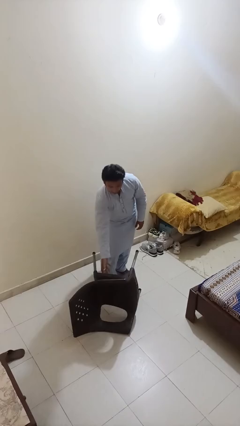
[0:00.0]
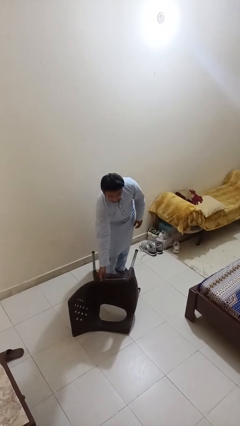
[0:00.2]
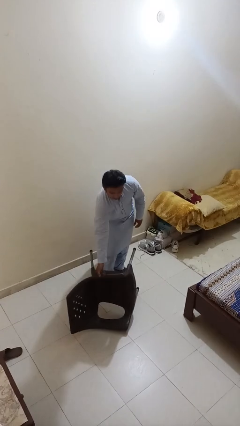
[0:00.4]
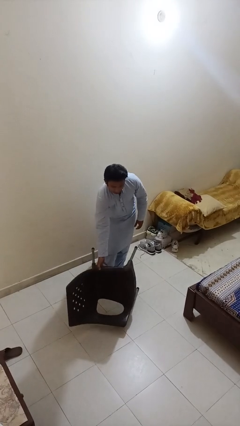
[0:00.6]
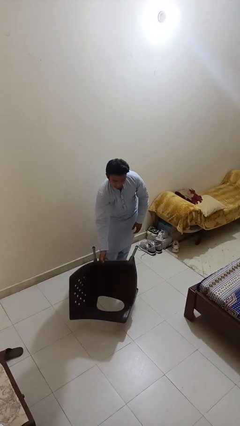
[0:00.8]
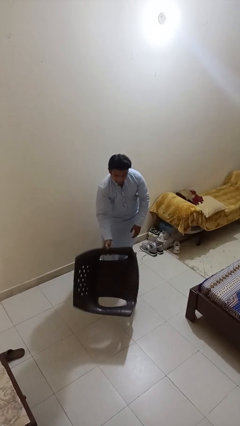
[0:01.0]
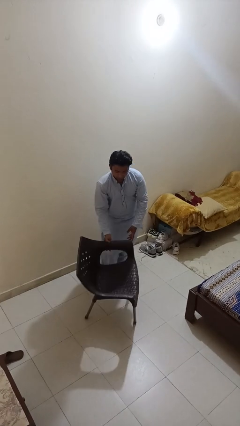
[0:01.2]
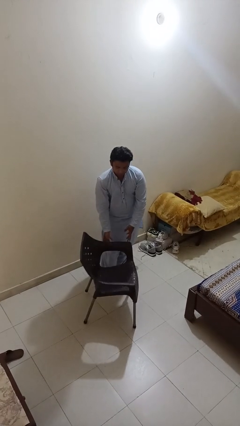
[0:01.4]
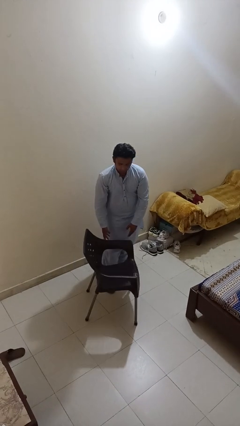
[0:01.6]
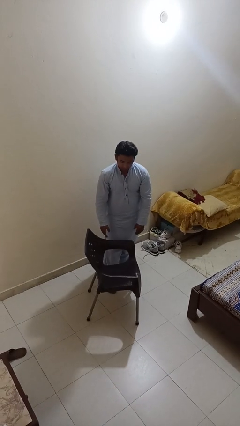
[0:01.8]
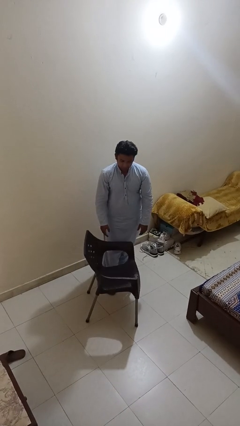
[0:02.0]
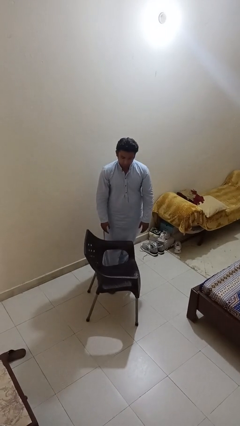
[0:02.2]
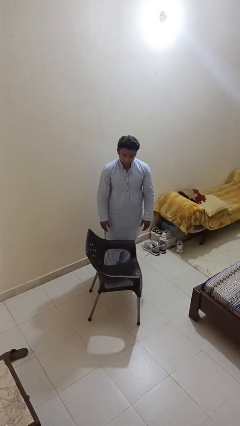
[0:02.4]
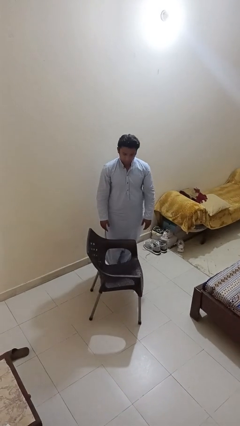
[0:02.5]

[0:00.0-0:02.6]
person sets upright furniture

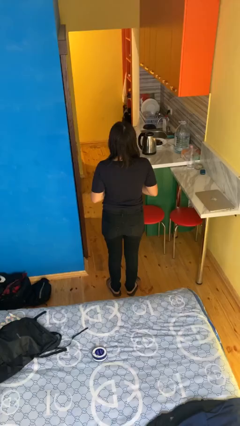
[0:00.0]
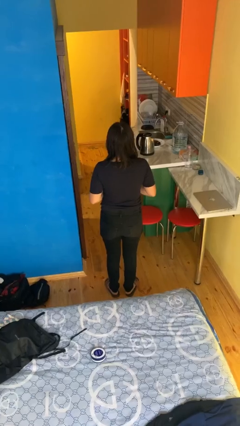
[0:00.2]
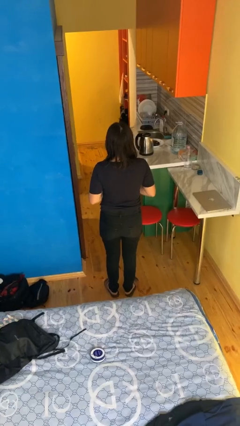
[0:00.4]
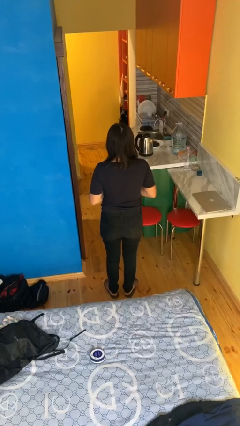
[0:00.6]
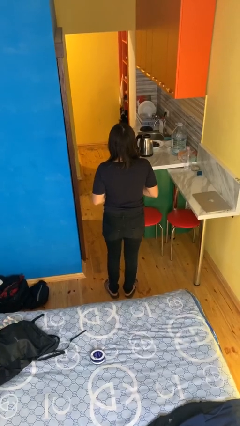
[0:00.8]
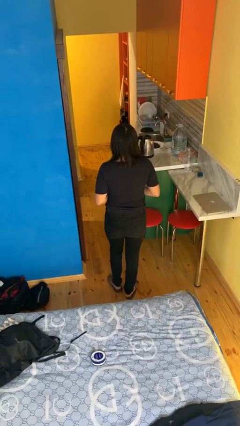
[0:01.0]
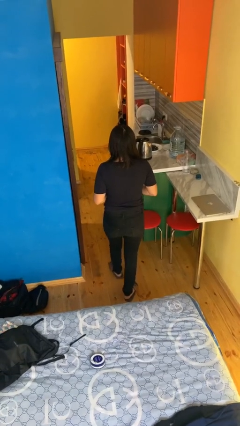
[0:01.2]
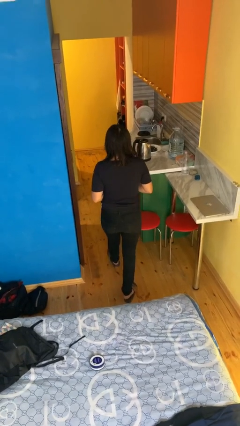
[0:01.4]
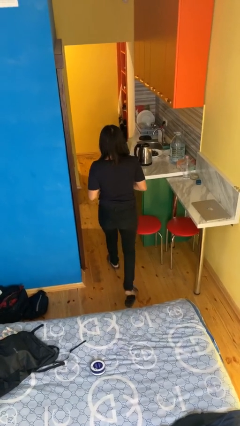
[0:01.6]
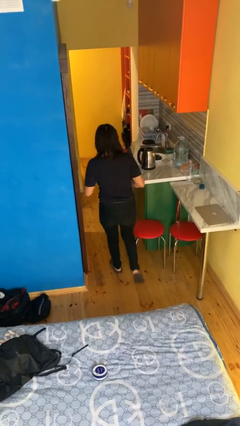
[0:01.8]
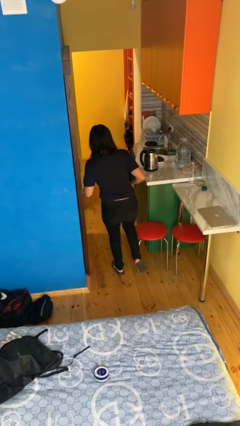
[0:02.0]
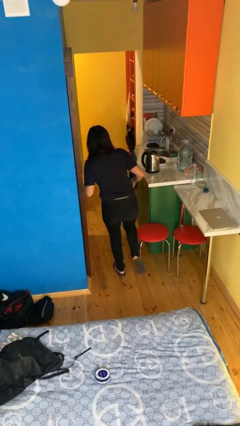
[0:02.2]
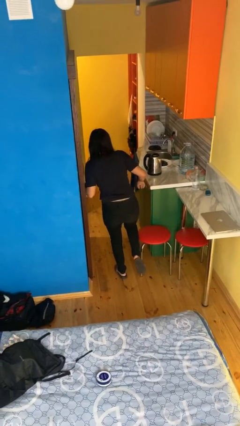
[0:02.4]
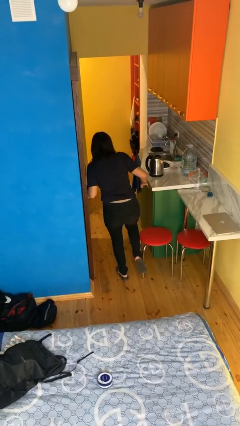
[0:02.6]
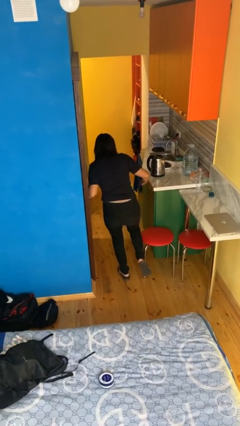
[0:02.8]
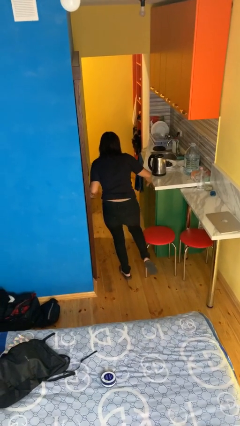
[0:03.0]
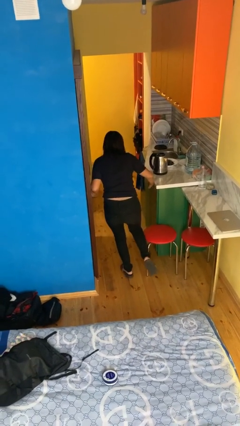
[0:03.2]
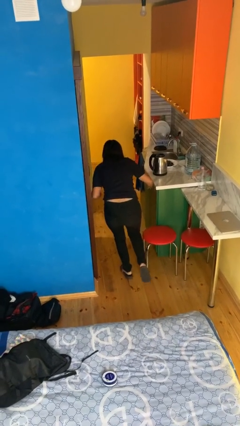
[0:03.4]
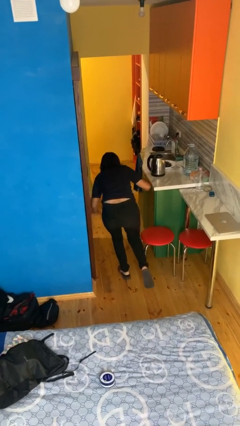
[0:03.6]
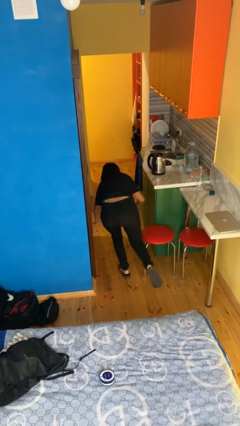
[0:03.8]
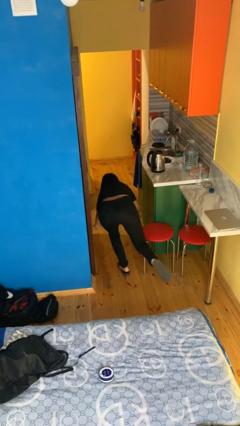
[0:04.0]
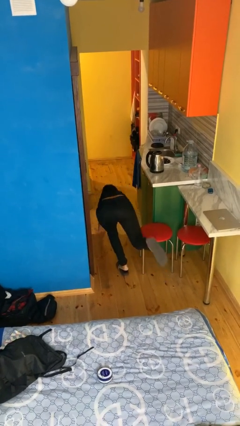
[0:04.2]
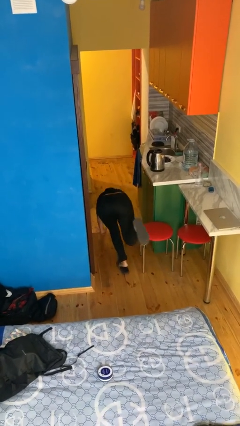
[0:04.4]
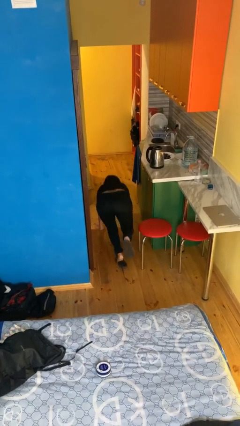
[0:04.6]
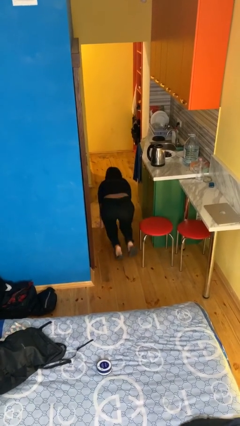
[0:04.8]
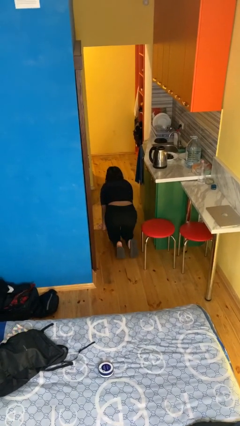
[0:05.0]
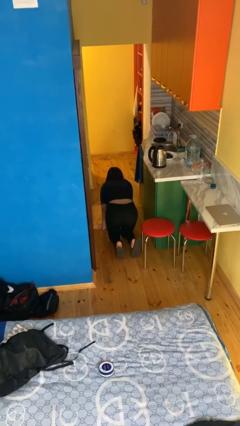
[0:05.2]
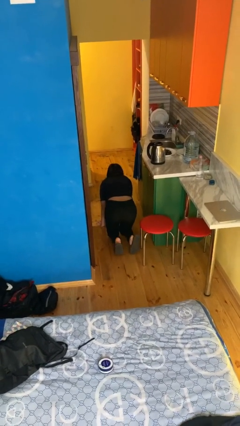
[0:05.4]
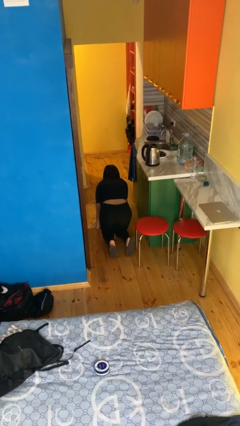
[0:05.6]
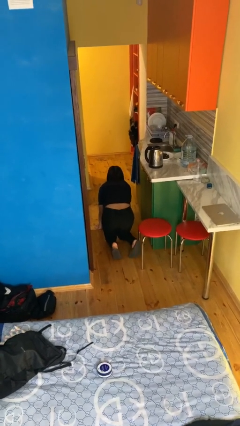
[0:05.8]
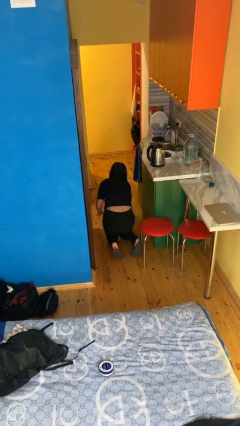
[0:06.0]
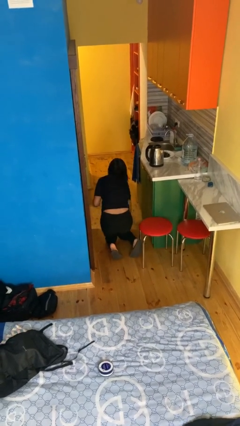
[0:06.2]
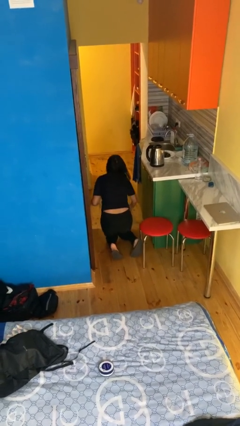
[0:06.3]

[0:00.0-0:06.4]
person trips on object on floor

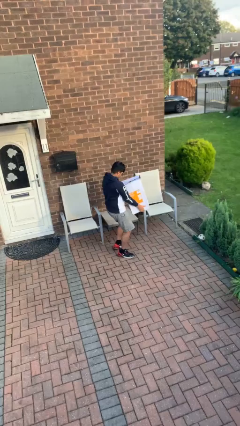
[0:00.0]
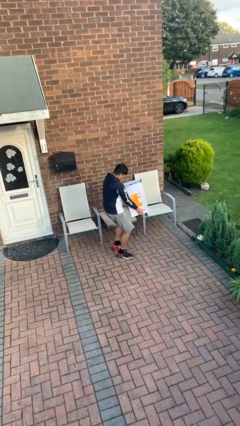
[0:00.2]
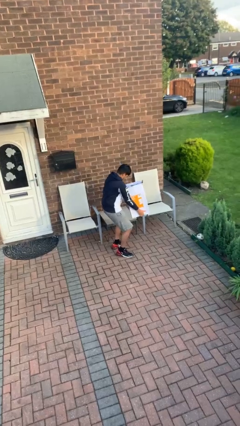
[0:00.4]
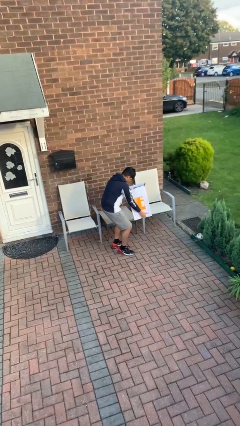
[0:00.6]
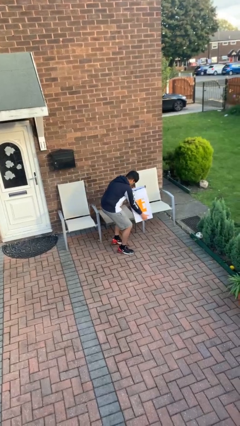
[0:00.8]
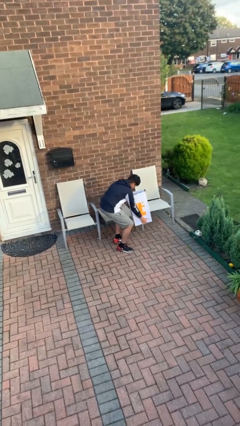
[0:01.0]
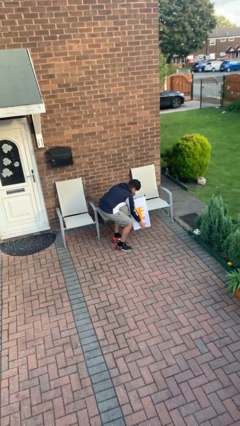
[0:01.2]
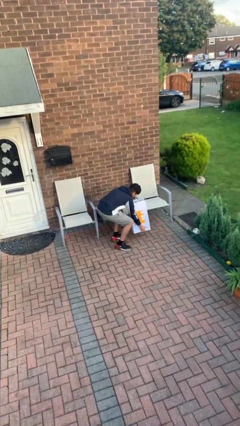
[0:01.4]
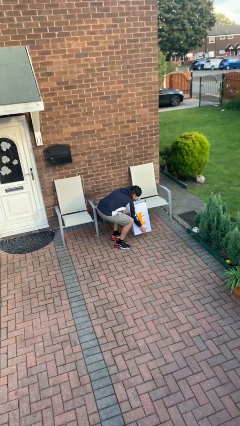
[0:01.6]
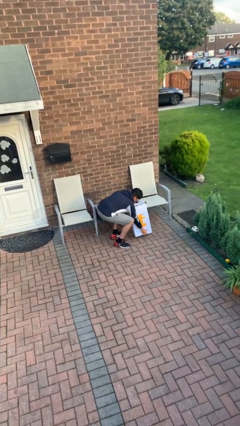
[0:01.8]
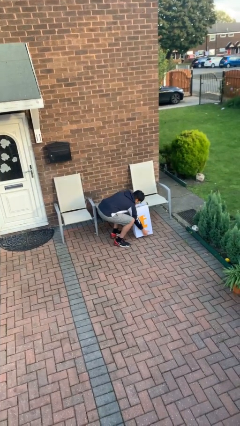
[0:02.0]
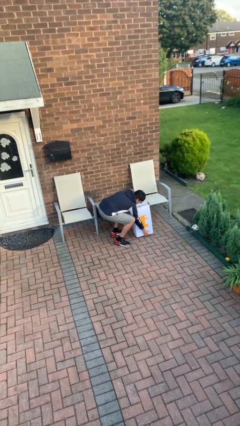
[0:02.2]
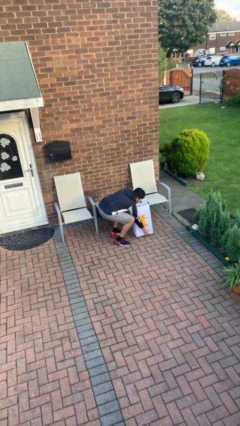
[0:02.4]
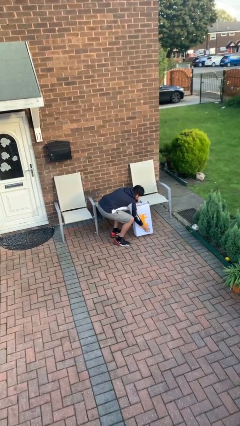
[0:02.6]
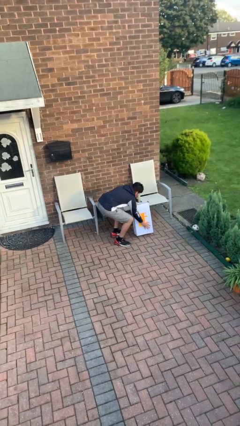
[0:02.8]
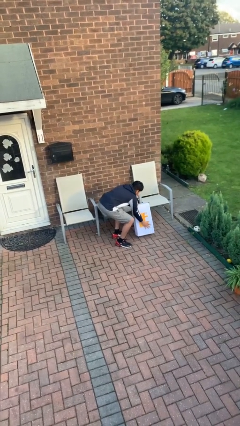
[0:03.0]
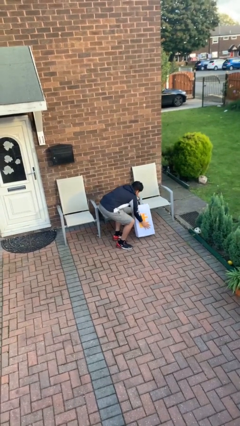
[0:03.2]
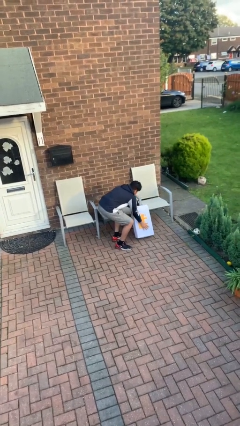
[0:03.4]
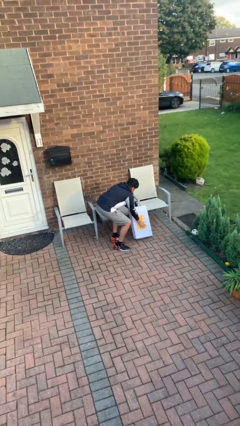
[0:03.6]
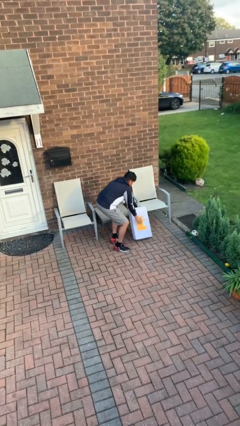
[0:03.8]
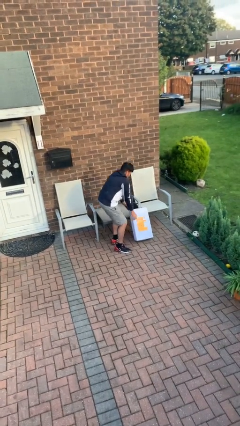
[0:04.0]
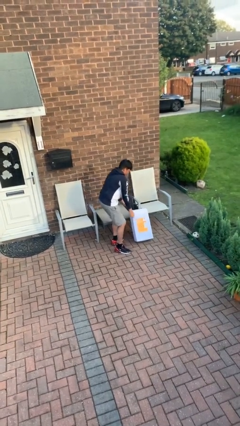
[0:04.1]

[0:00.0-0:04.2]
person puts down object on floor

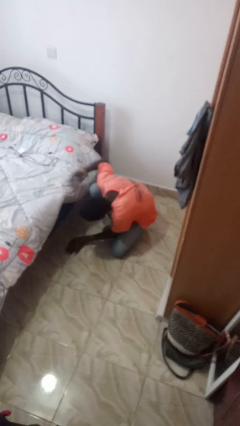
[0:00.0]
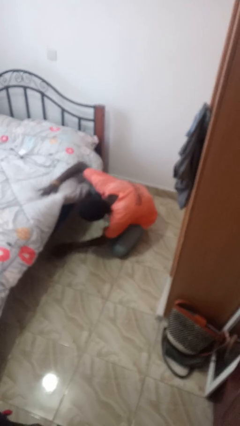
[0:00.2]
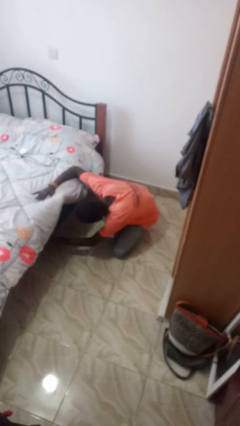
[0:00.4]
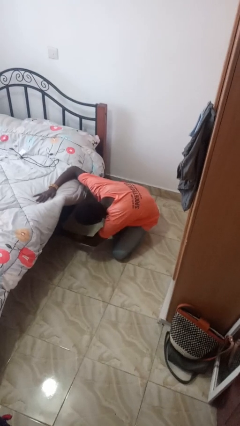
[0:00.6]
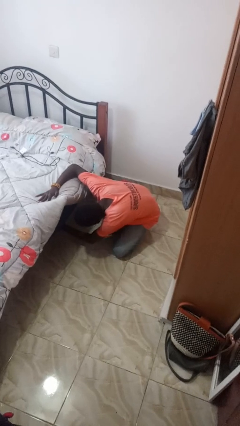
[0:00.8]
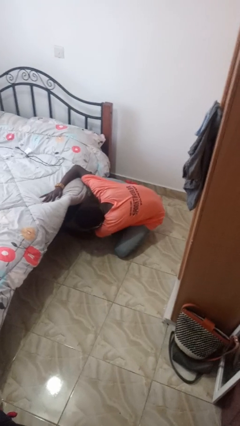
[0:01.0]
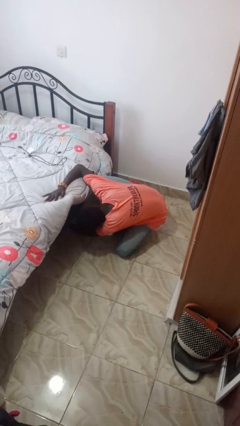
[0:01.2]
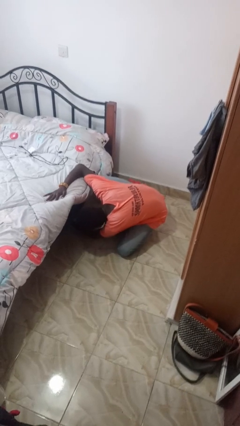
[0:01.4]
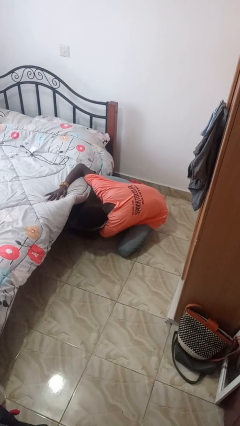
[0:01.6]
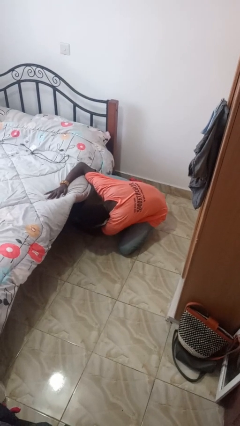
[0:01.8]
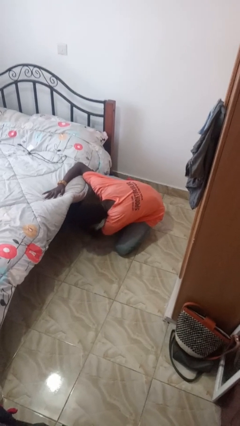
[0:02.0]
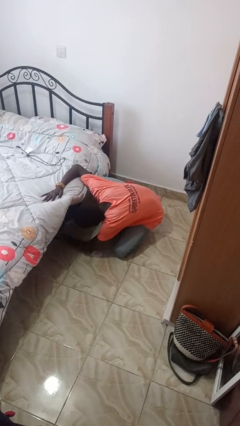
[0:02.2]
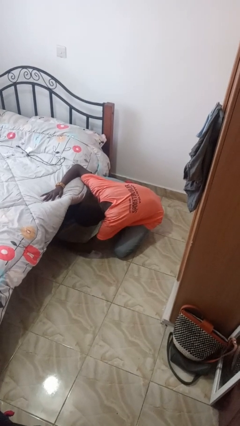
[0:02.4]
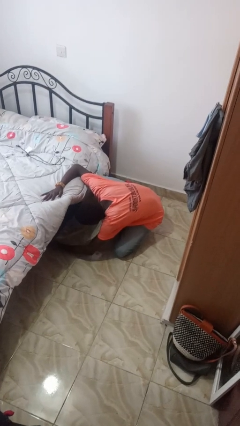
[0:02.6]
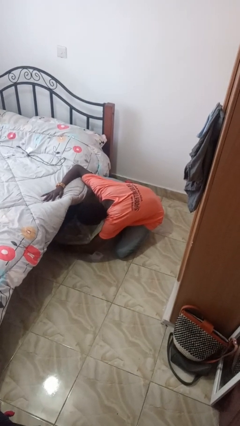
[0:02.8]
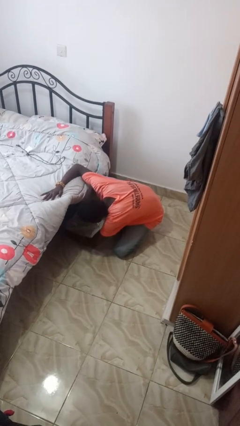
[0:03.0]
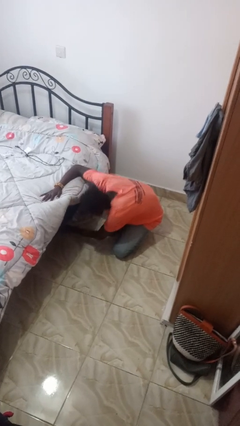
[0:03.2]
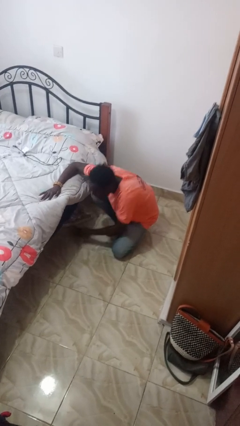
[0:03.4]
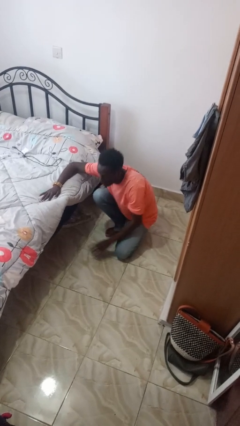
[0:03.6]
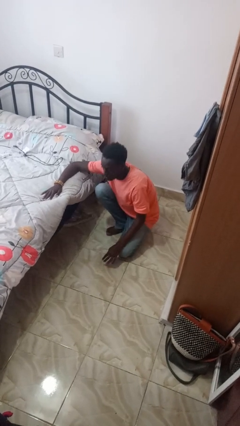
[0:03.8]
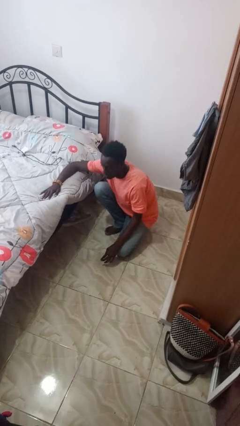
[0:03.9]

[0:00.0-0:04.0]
person searches under bed

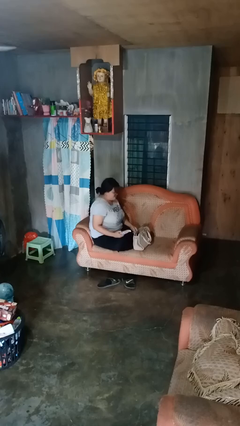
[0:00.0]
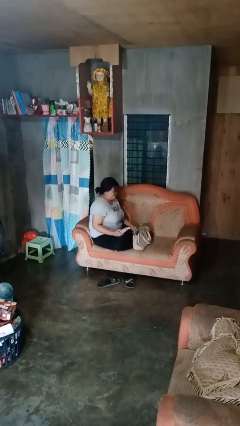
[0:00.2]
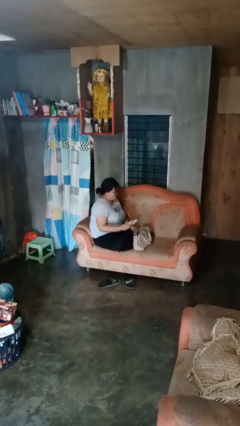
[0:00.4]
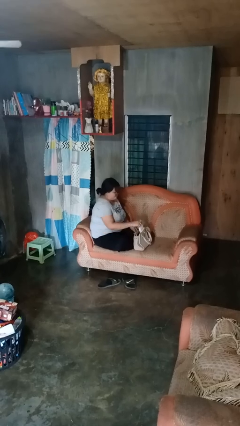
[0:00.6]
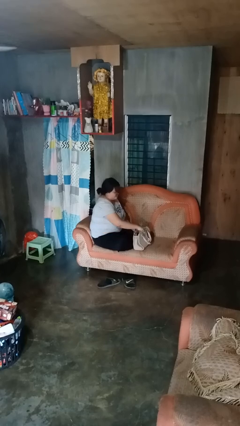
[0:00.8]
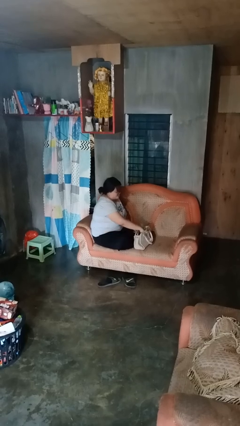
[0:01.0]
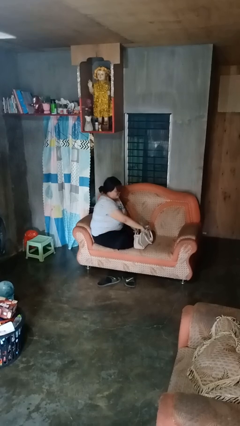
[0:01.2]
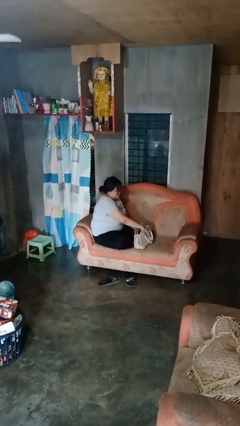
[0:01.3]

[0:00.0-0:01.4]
person puts object into purse
